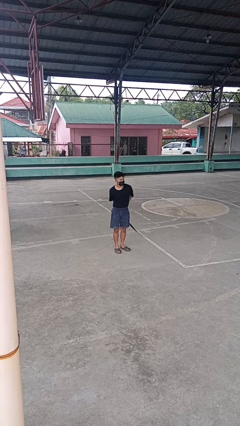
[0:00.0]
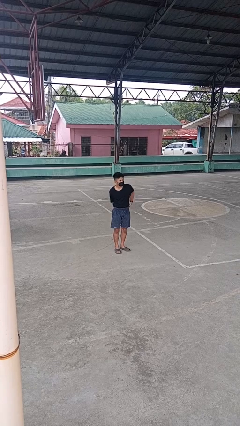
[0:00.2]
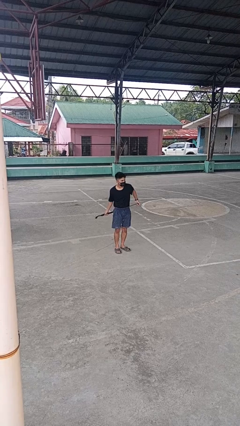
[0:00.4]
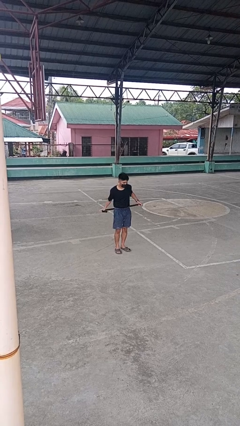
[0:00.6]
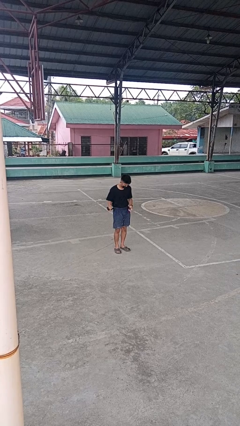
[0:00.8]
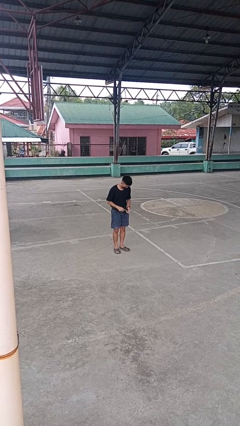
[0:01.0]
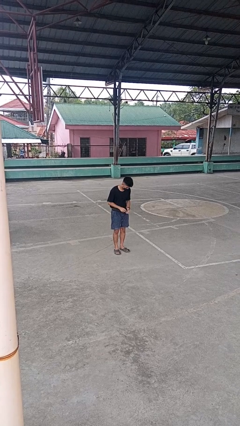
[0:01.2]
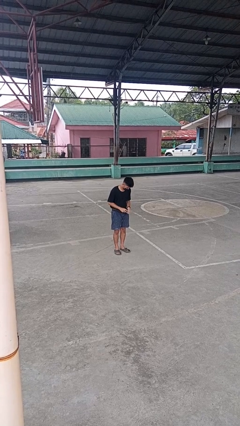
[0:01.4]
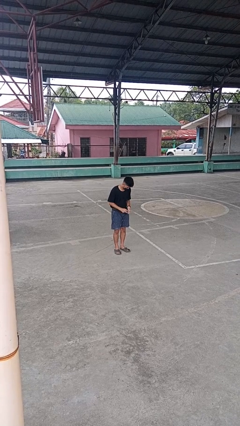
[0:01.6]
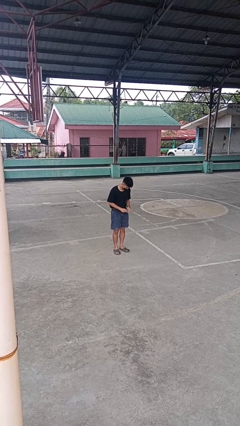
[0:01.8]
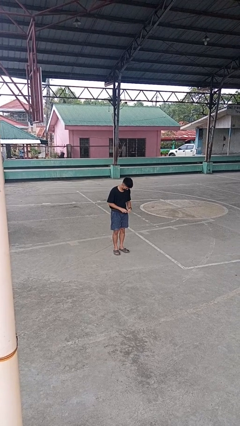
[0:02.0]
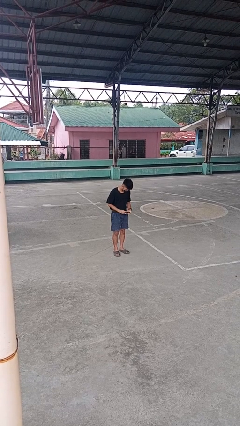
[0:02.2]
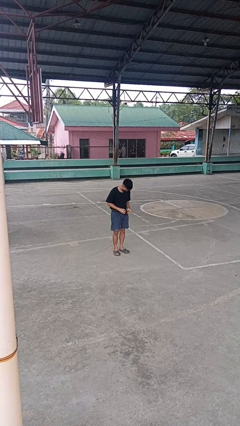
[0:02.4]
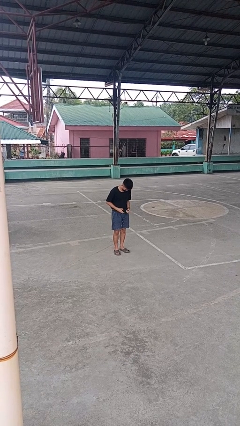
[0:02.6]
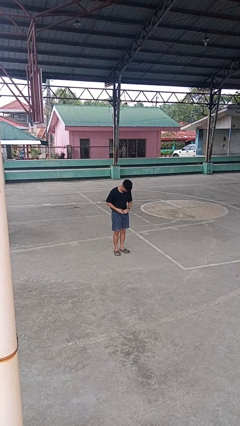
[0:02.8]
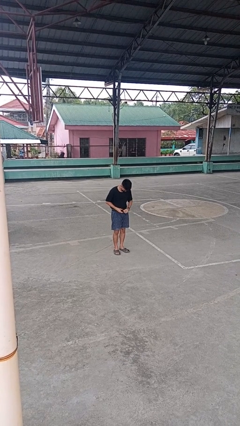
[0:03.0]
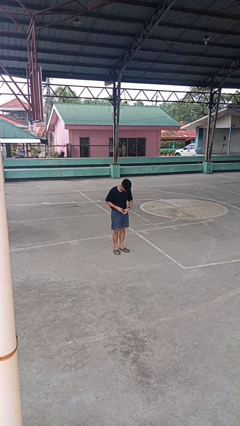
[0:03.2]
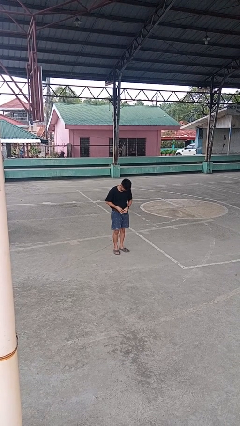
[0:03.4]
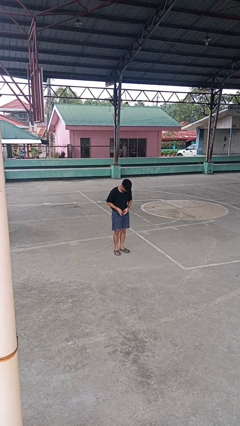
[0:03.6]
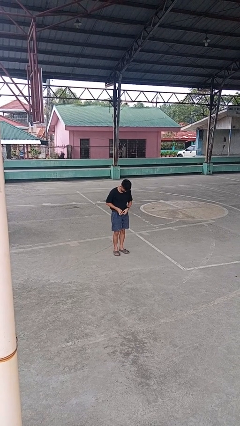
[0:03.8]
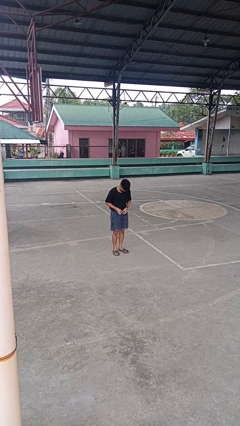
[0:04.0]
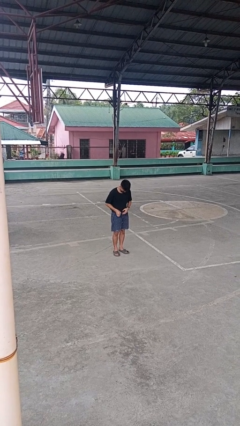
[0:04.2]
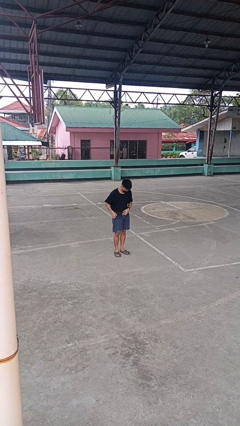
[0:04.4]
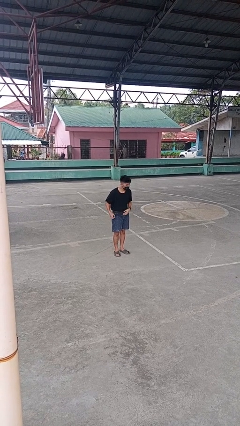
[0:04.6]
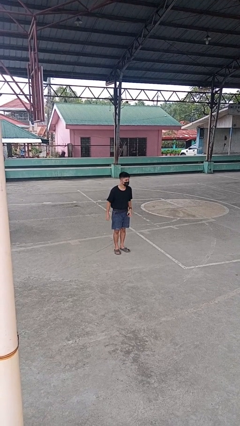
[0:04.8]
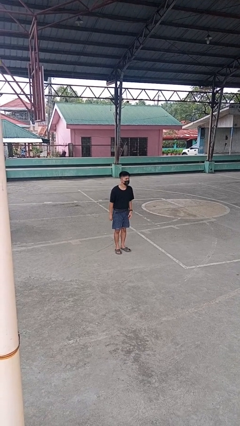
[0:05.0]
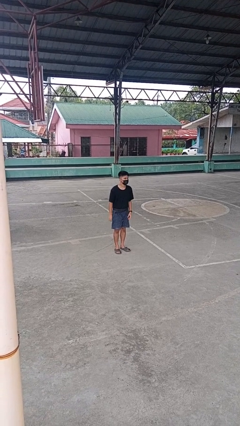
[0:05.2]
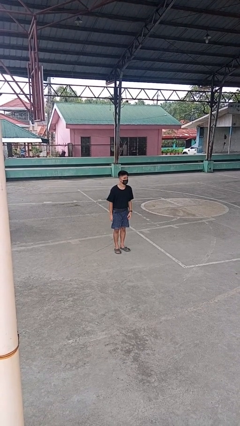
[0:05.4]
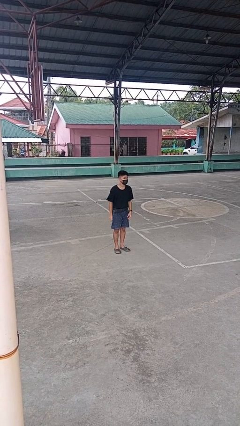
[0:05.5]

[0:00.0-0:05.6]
person puts on belt

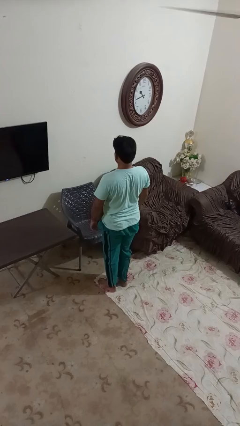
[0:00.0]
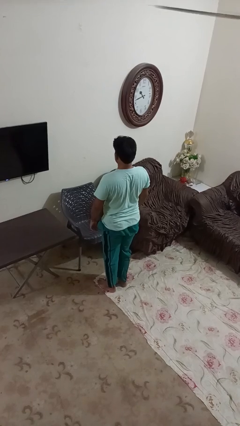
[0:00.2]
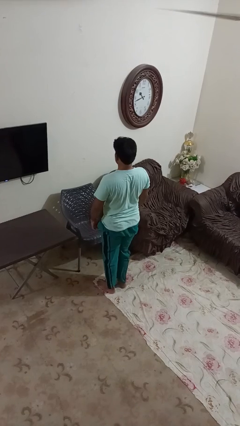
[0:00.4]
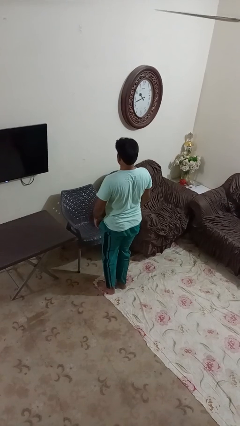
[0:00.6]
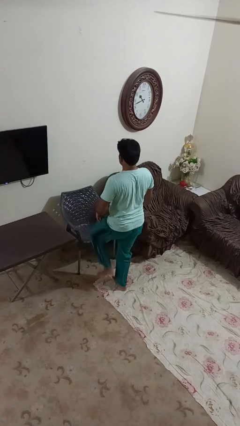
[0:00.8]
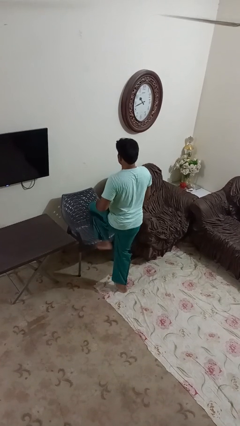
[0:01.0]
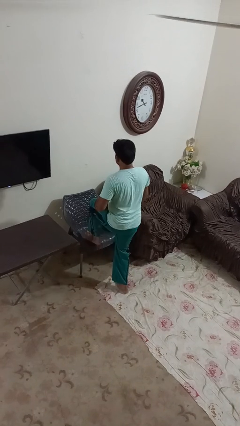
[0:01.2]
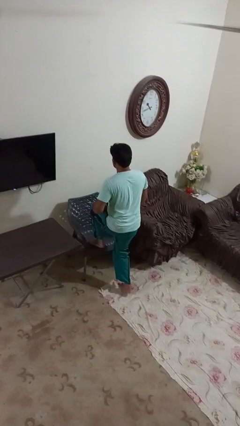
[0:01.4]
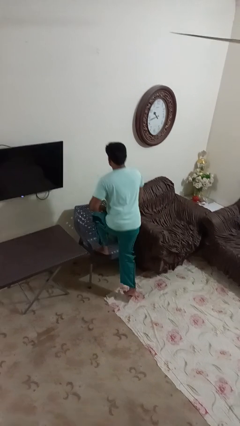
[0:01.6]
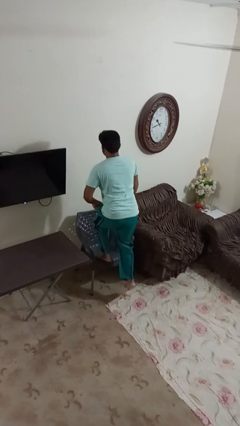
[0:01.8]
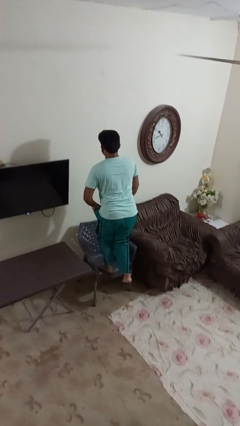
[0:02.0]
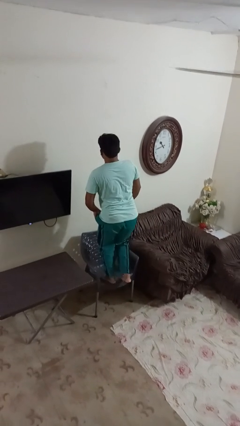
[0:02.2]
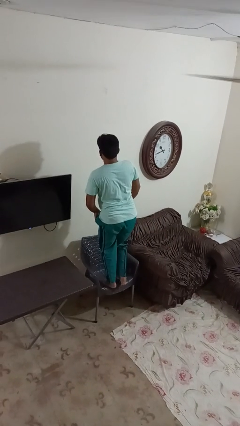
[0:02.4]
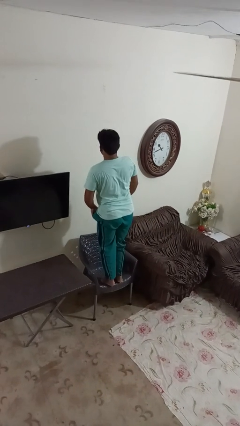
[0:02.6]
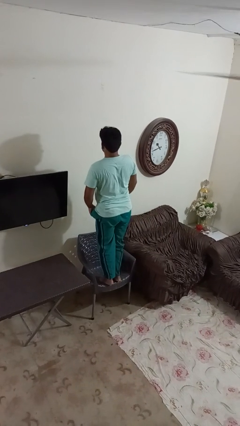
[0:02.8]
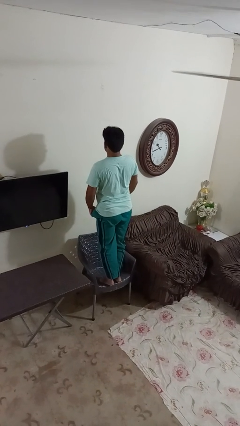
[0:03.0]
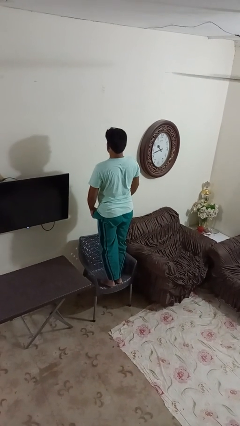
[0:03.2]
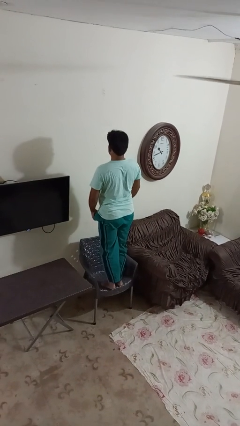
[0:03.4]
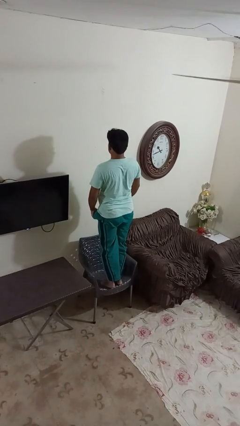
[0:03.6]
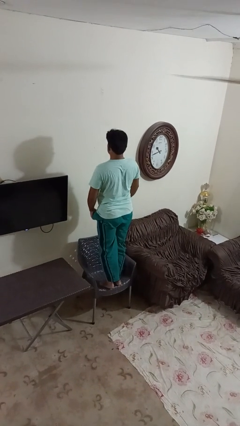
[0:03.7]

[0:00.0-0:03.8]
person climbs on chair

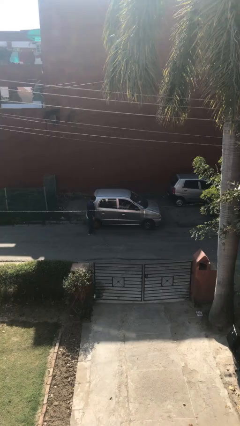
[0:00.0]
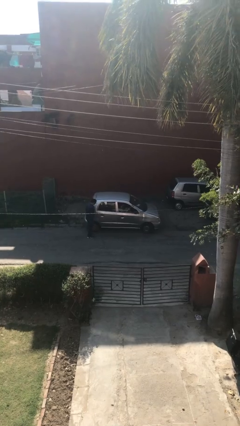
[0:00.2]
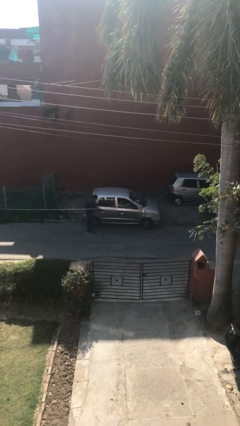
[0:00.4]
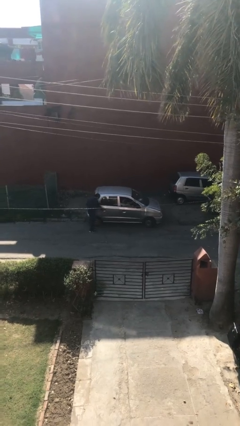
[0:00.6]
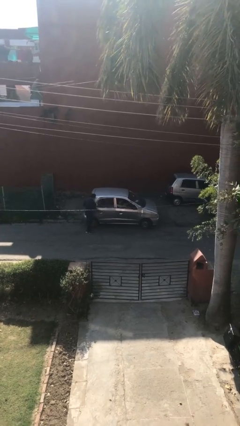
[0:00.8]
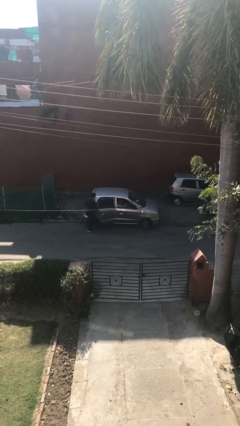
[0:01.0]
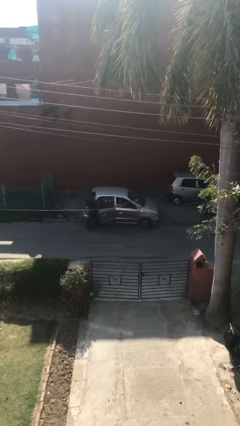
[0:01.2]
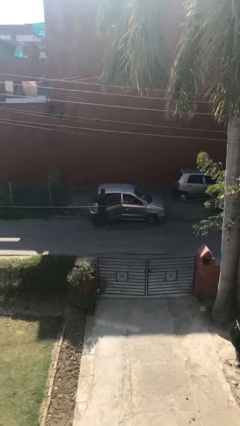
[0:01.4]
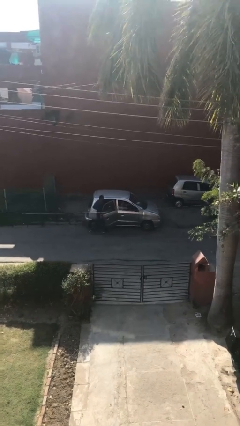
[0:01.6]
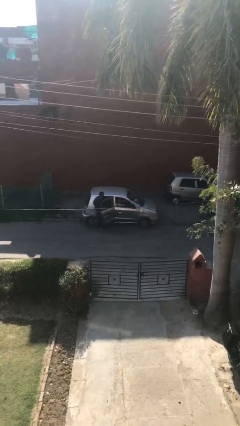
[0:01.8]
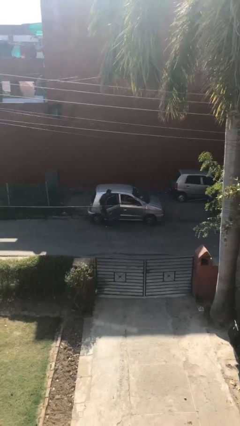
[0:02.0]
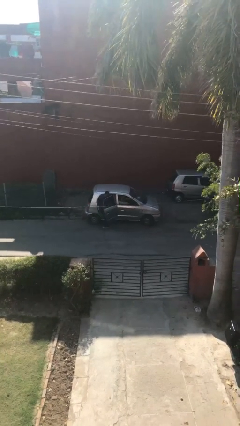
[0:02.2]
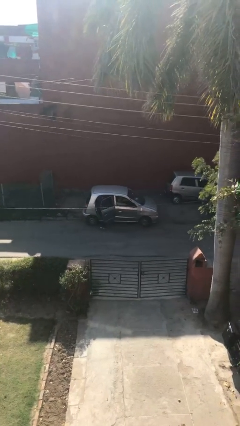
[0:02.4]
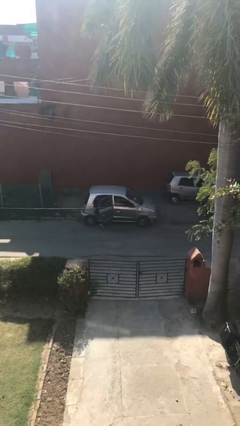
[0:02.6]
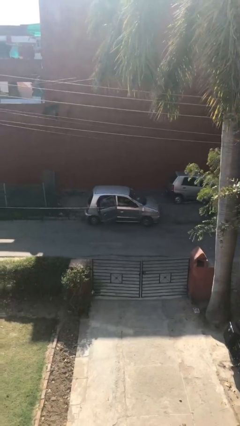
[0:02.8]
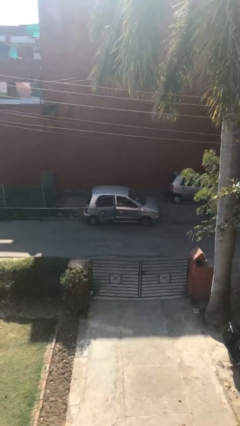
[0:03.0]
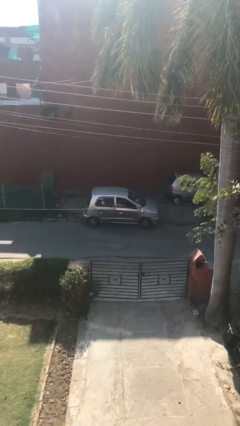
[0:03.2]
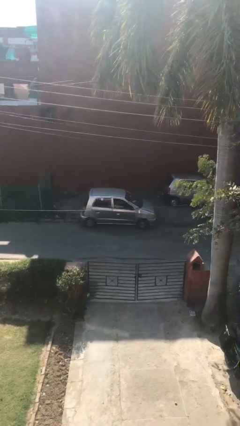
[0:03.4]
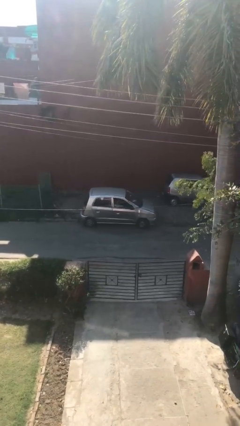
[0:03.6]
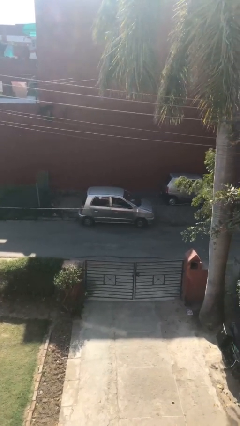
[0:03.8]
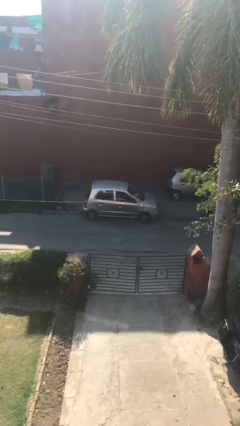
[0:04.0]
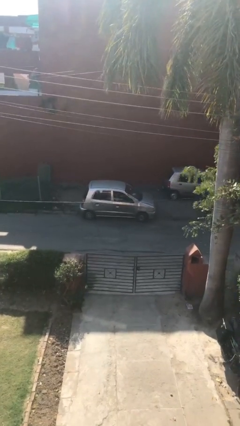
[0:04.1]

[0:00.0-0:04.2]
car picks up person

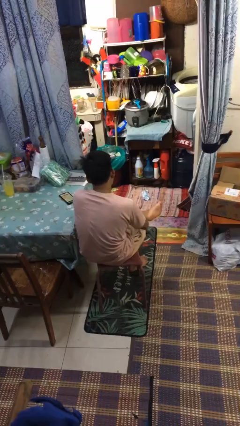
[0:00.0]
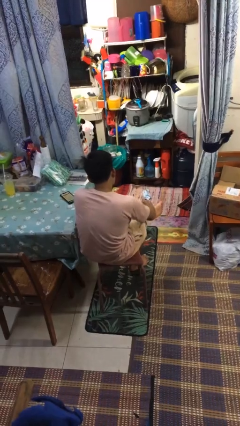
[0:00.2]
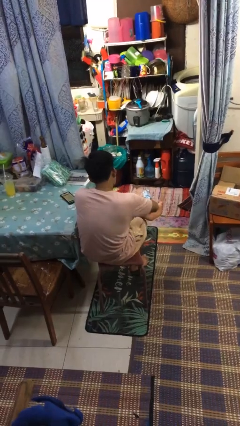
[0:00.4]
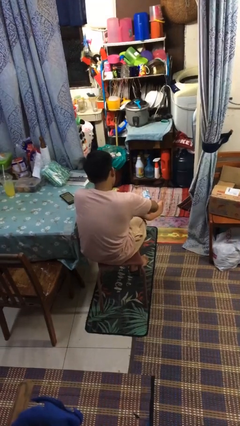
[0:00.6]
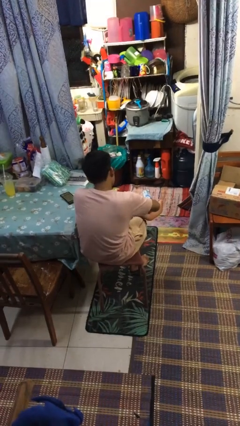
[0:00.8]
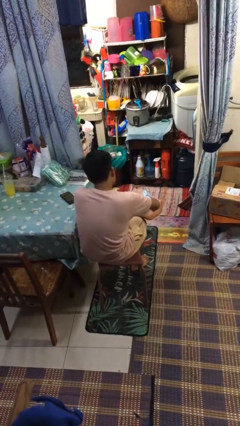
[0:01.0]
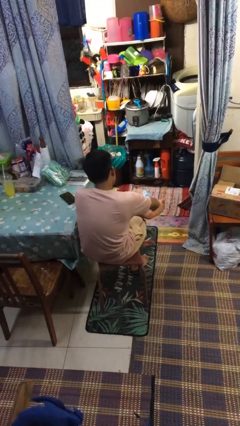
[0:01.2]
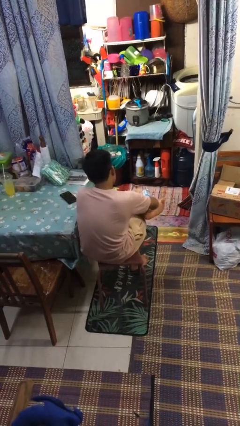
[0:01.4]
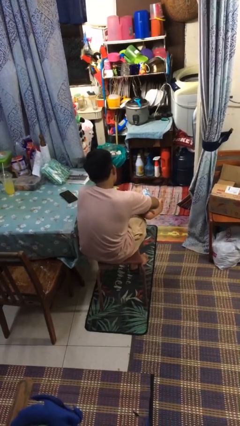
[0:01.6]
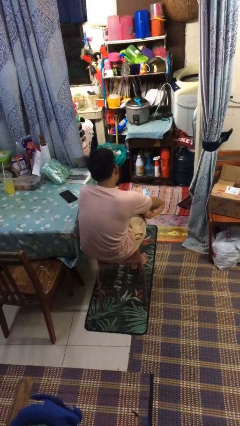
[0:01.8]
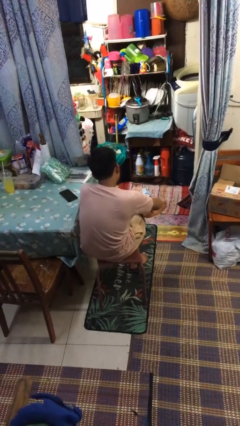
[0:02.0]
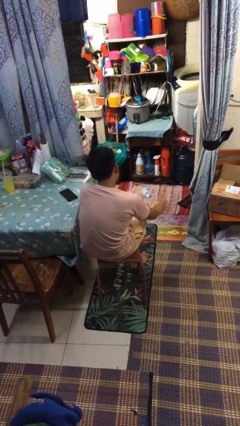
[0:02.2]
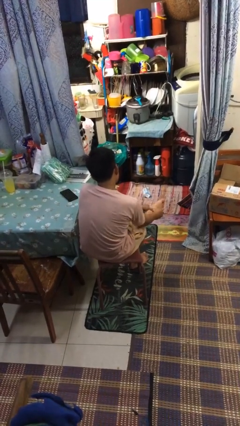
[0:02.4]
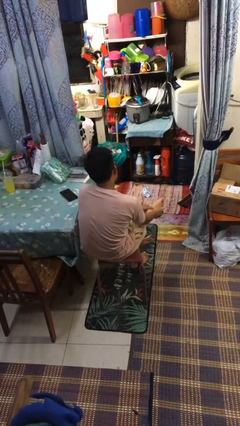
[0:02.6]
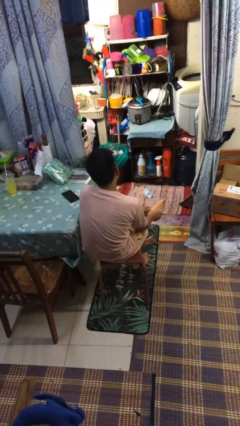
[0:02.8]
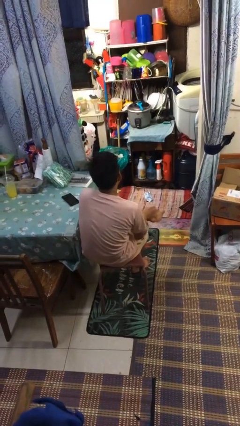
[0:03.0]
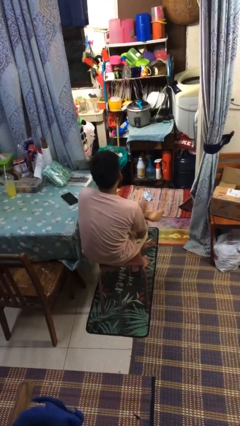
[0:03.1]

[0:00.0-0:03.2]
person rubs foot

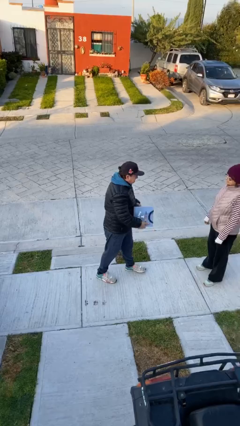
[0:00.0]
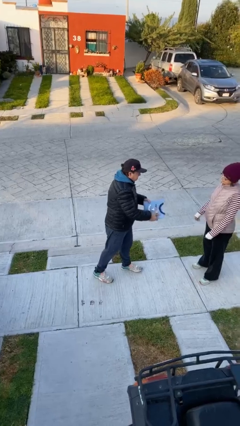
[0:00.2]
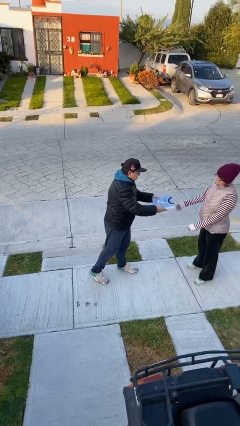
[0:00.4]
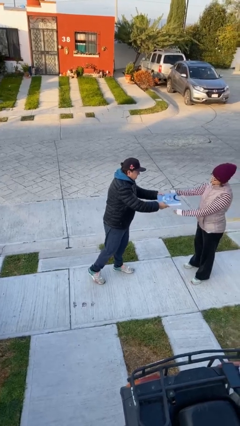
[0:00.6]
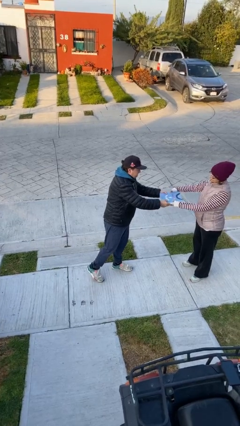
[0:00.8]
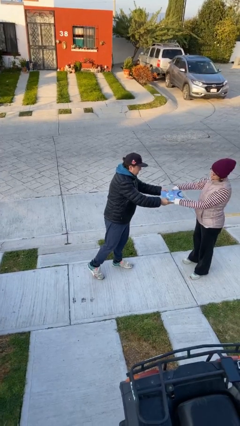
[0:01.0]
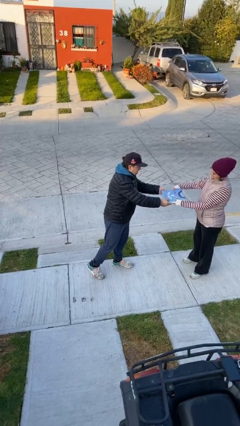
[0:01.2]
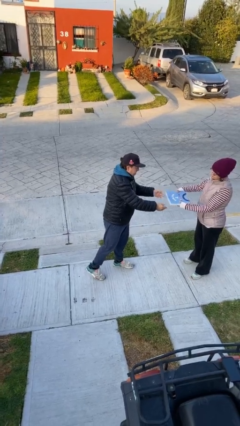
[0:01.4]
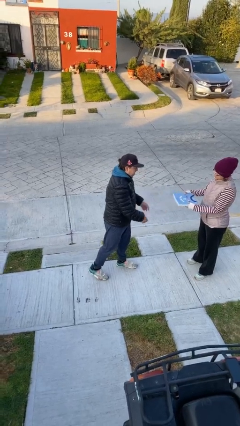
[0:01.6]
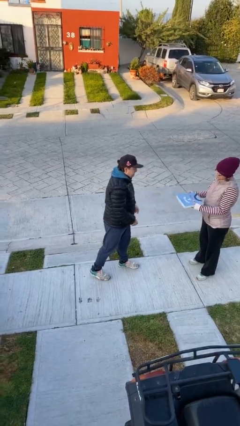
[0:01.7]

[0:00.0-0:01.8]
person transfers object to person
